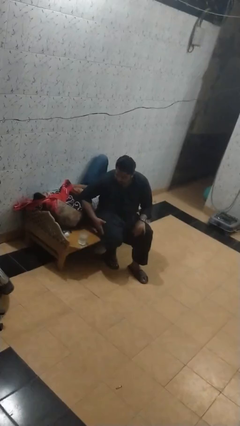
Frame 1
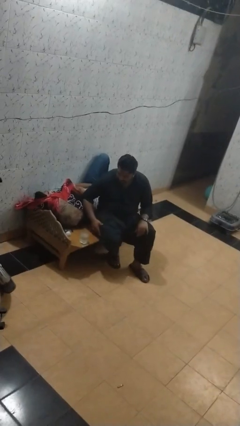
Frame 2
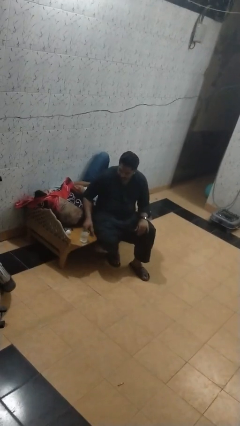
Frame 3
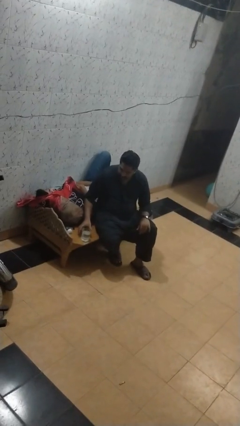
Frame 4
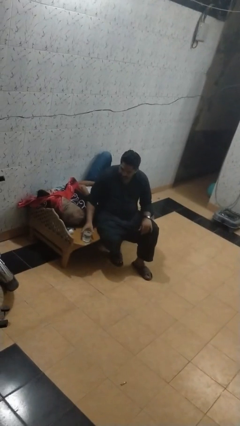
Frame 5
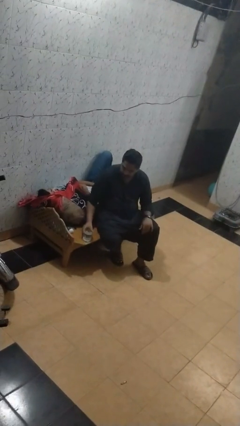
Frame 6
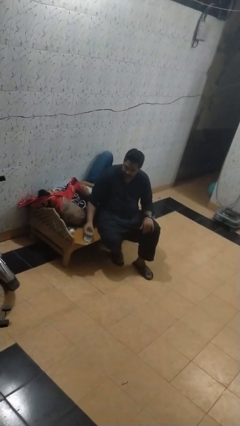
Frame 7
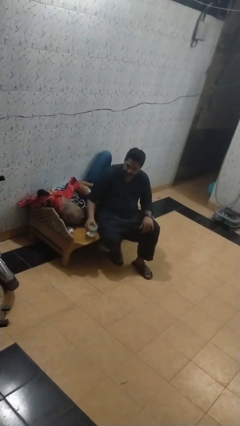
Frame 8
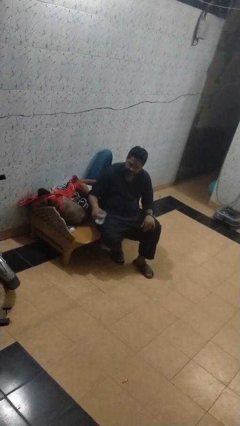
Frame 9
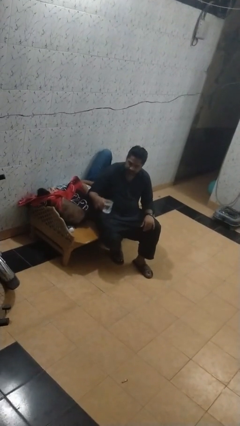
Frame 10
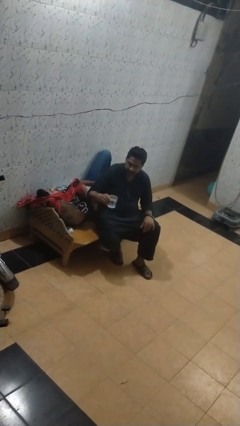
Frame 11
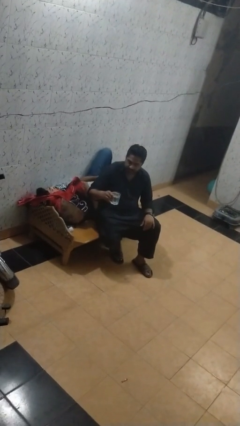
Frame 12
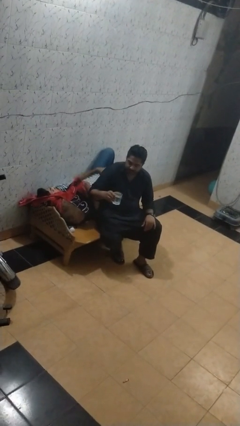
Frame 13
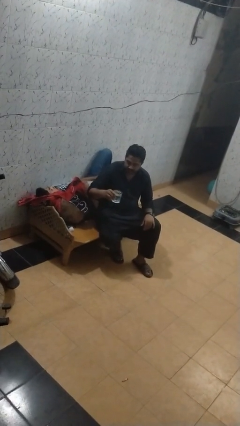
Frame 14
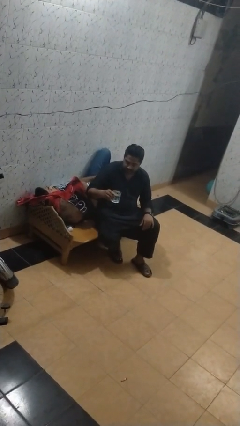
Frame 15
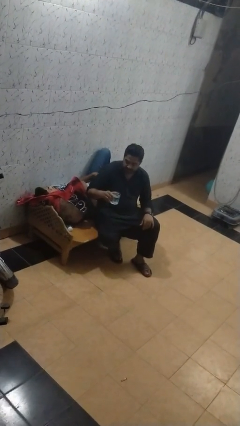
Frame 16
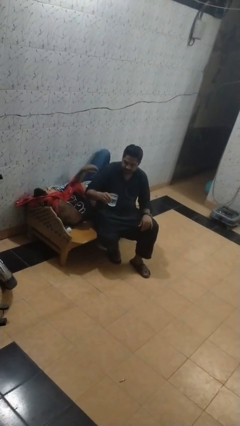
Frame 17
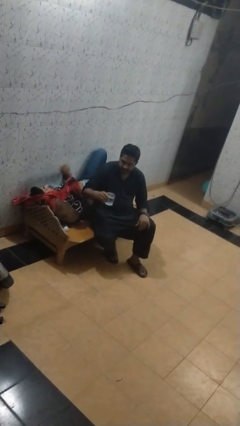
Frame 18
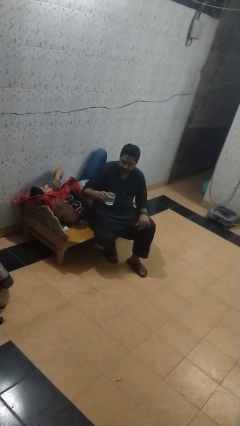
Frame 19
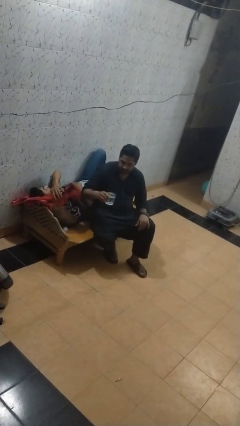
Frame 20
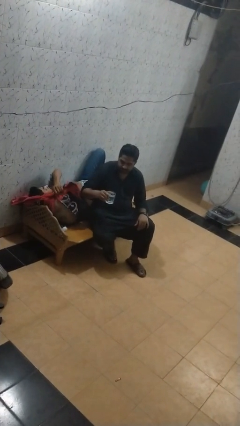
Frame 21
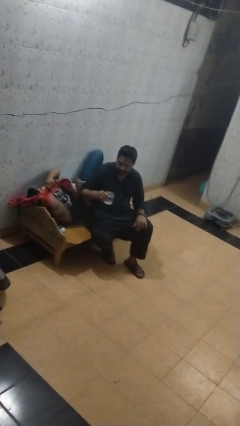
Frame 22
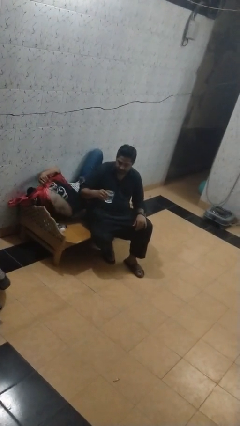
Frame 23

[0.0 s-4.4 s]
person picks up object from table

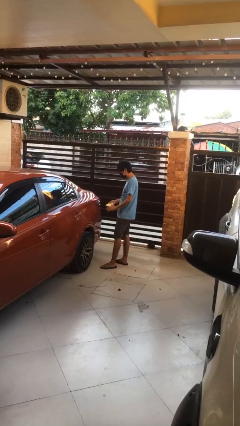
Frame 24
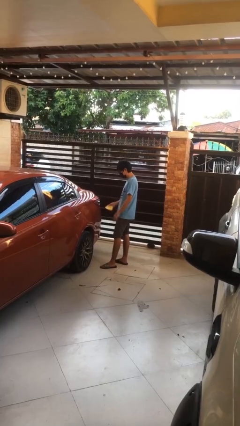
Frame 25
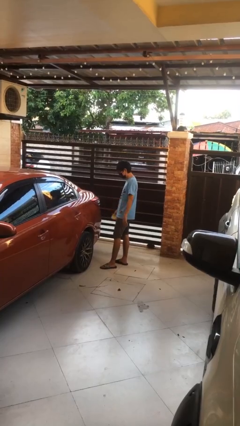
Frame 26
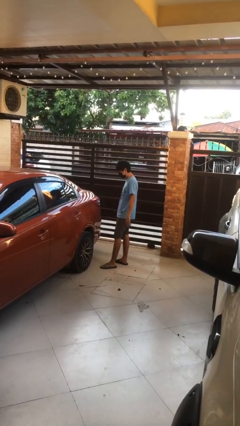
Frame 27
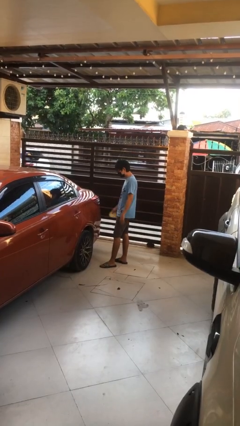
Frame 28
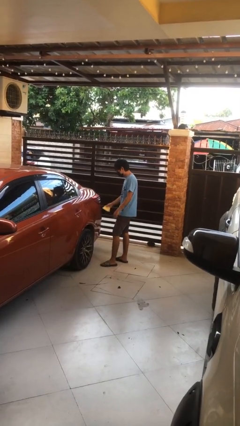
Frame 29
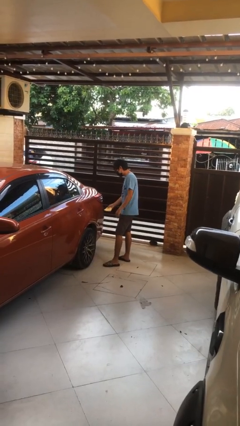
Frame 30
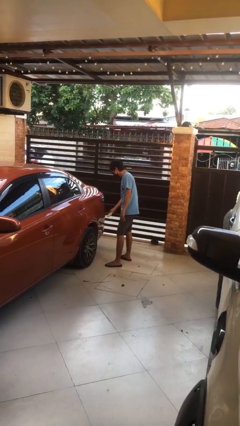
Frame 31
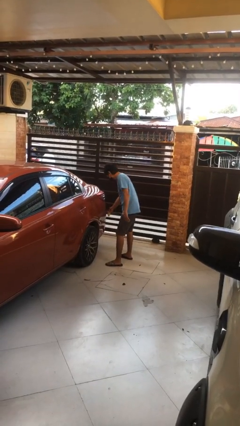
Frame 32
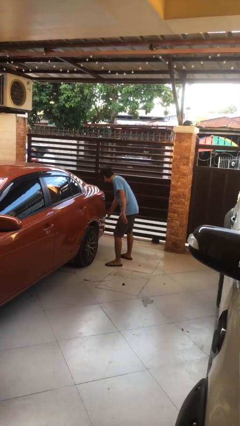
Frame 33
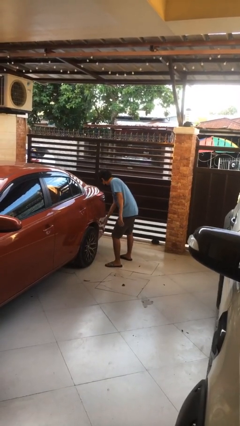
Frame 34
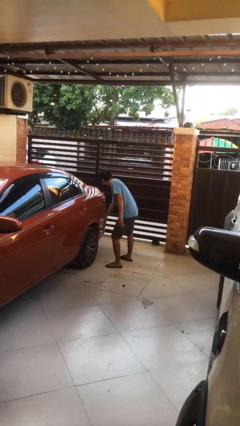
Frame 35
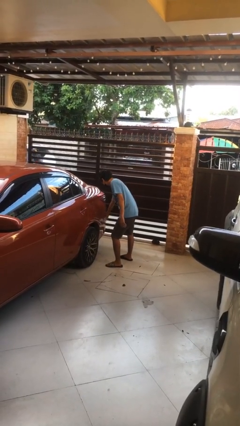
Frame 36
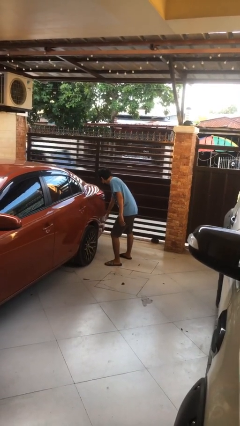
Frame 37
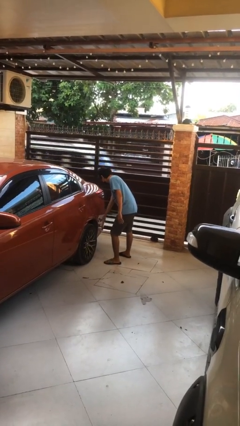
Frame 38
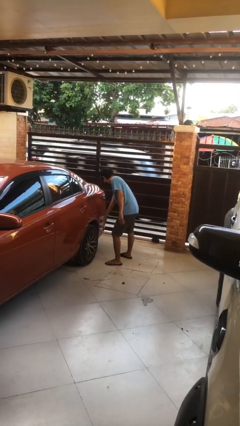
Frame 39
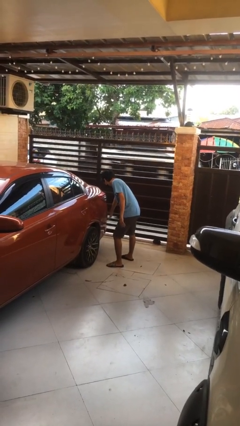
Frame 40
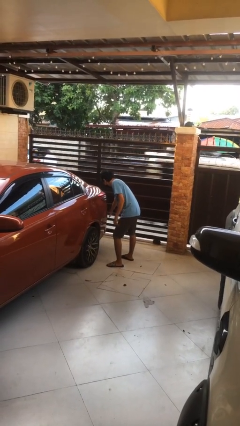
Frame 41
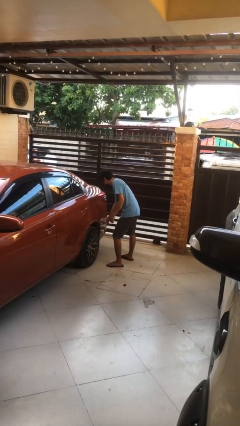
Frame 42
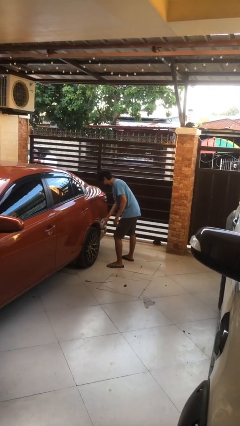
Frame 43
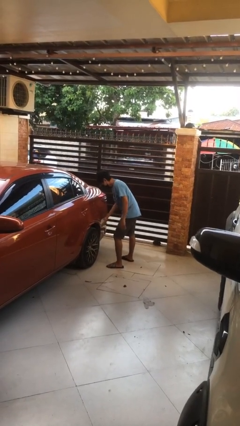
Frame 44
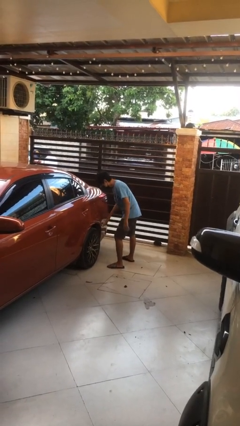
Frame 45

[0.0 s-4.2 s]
person polishes car with rag

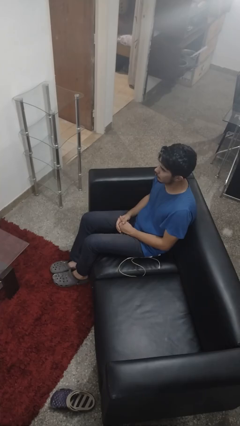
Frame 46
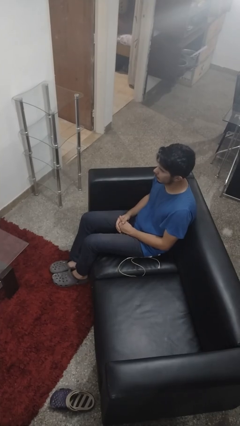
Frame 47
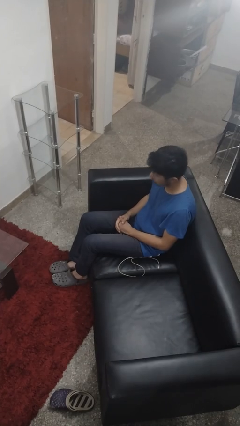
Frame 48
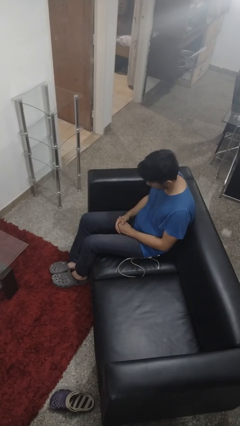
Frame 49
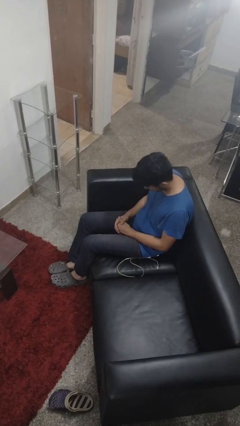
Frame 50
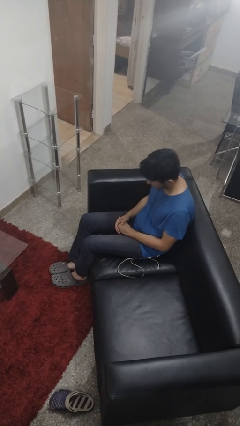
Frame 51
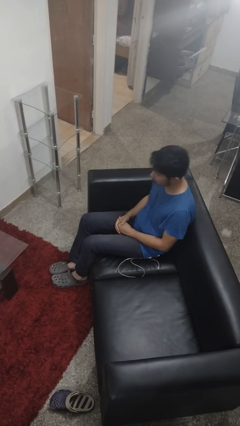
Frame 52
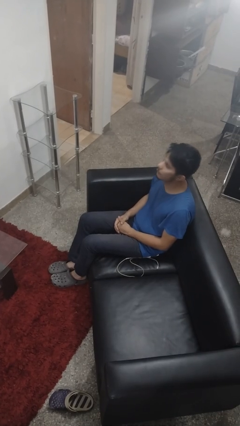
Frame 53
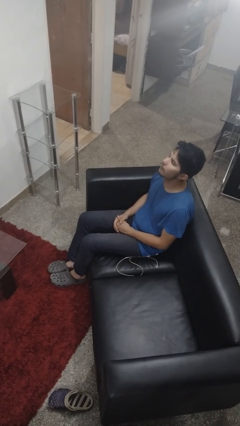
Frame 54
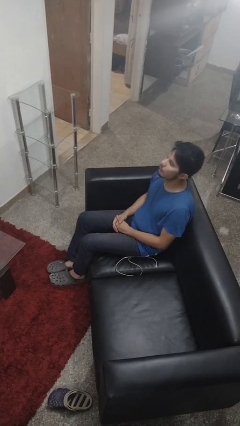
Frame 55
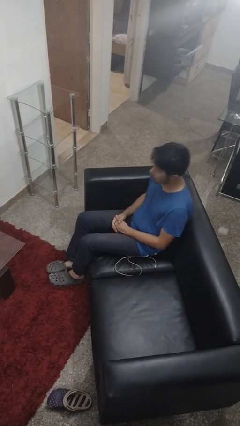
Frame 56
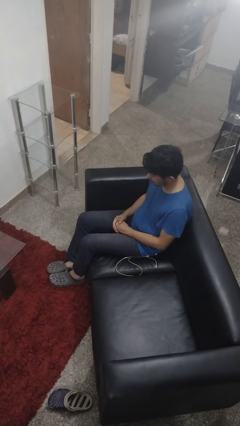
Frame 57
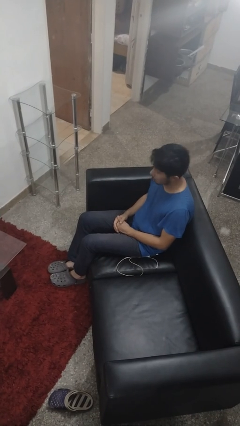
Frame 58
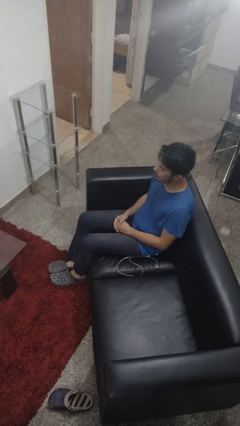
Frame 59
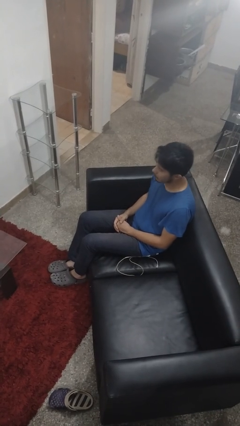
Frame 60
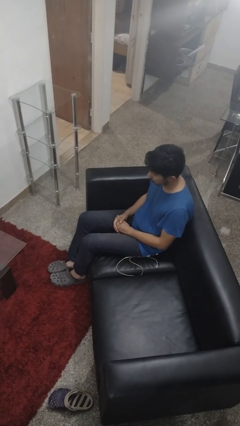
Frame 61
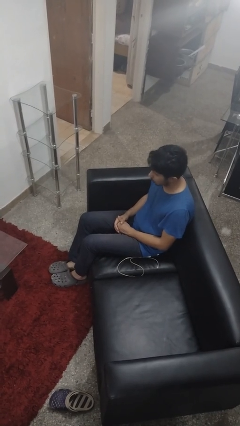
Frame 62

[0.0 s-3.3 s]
person nods head

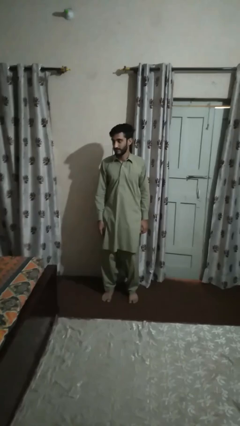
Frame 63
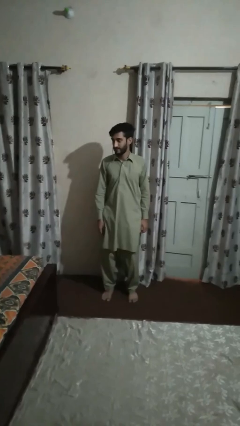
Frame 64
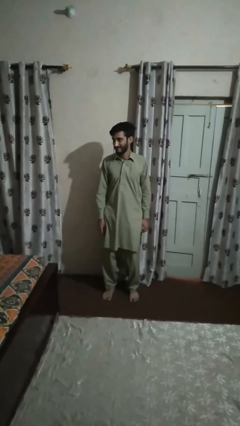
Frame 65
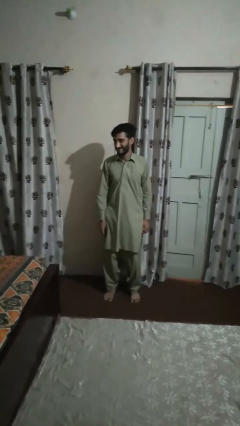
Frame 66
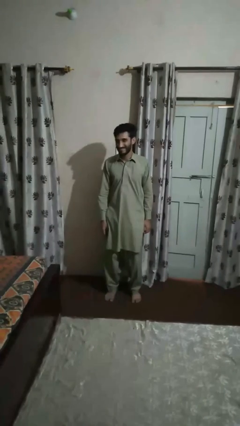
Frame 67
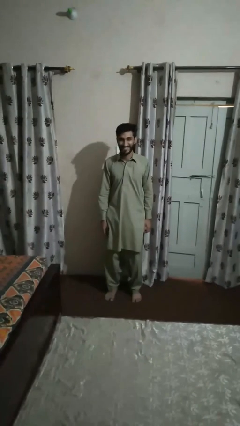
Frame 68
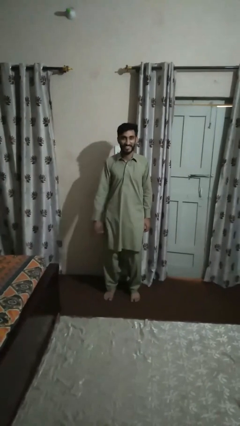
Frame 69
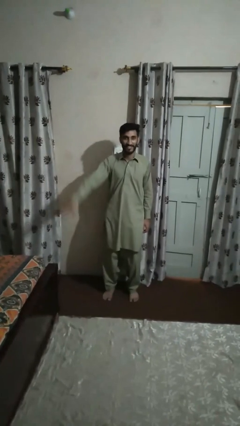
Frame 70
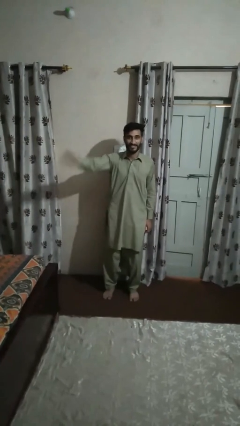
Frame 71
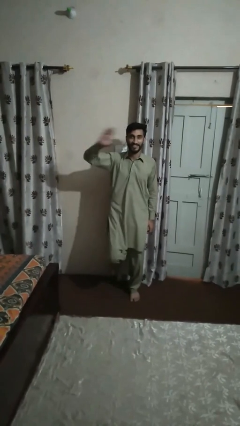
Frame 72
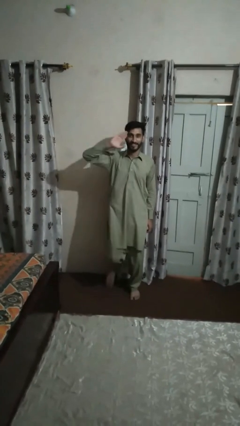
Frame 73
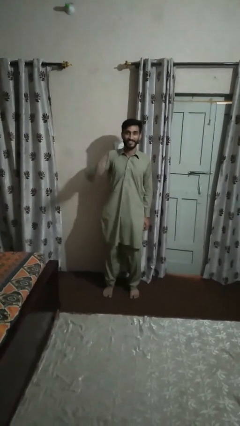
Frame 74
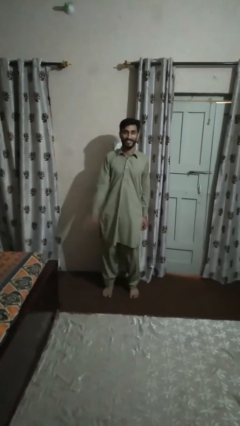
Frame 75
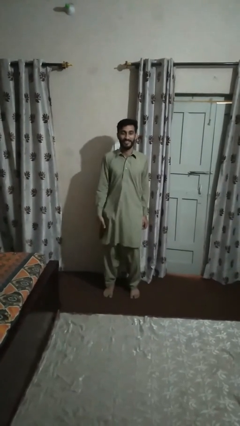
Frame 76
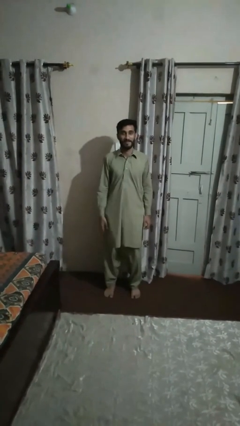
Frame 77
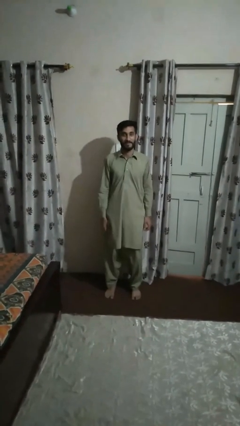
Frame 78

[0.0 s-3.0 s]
person salutes

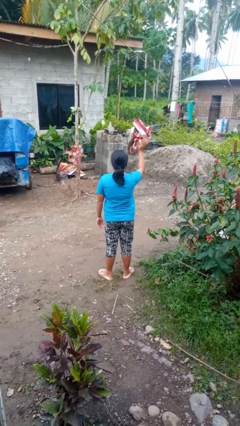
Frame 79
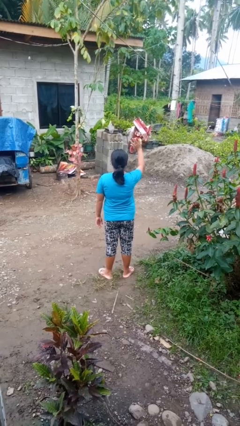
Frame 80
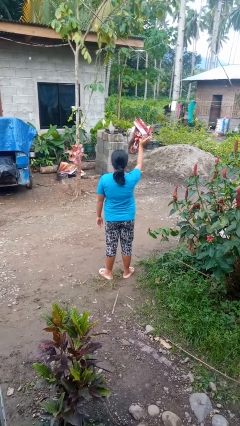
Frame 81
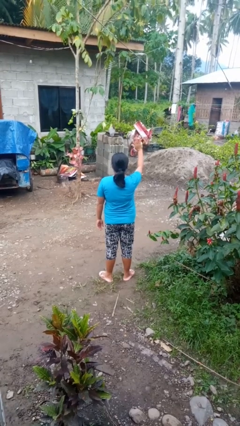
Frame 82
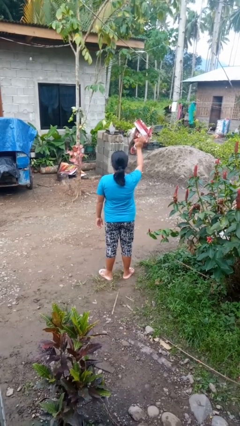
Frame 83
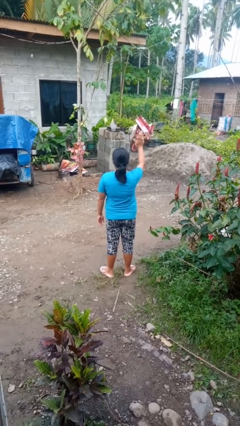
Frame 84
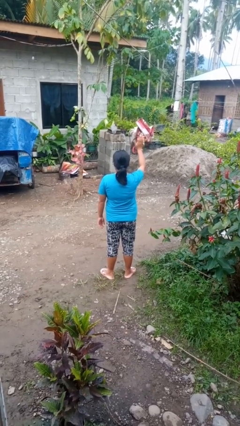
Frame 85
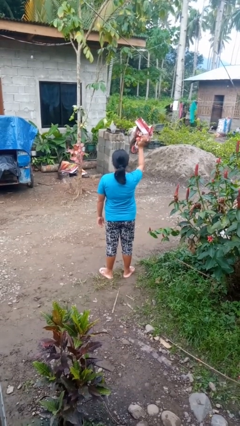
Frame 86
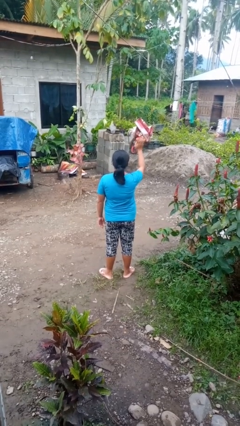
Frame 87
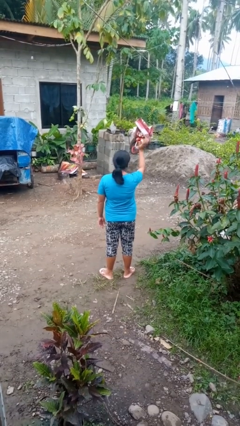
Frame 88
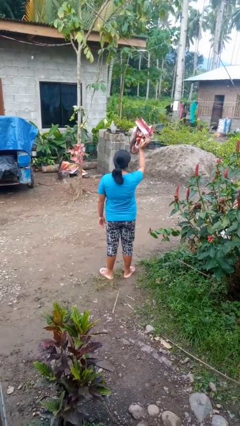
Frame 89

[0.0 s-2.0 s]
person waves at person

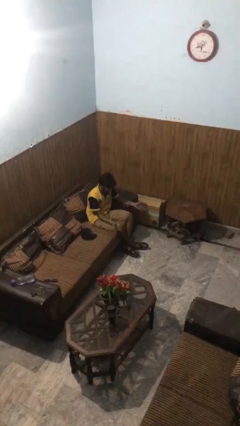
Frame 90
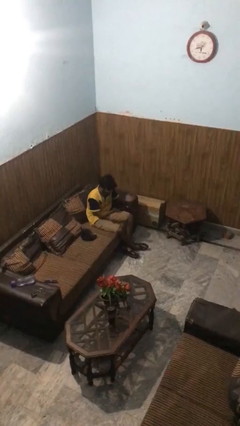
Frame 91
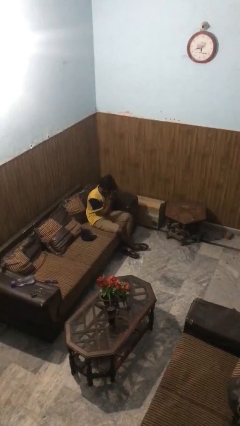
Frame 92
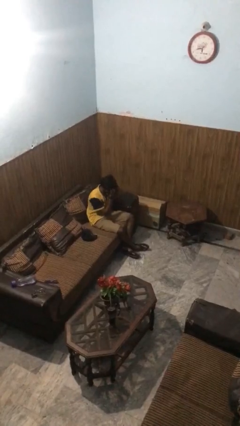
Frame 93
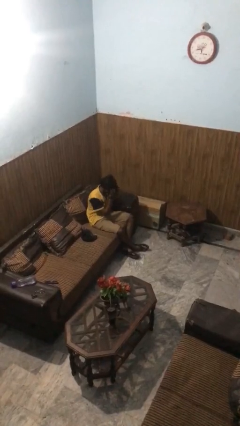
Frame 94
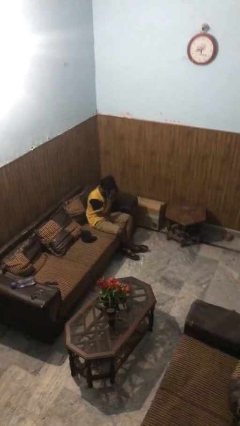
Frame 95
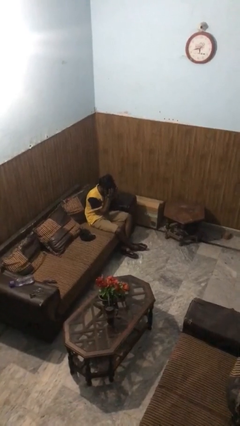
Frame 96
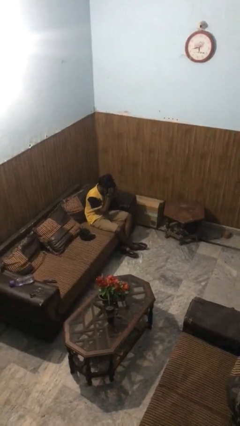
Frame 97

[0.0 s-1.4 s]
person covers face with hands
